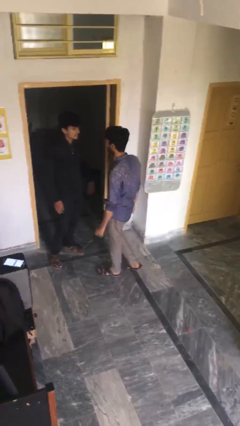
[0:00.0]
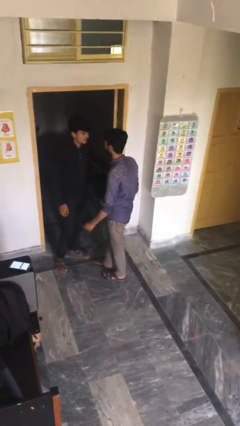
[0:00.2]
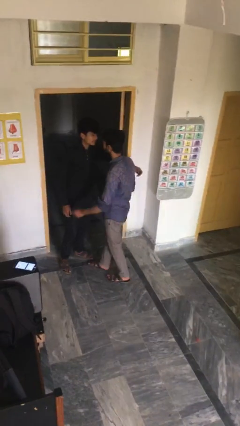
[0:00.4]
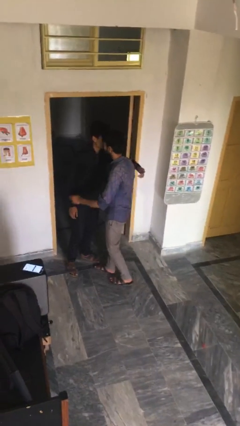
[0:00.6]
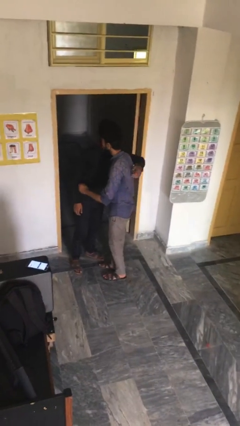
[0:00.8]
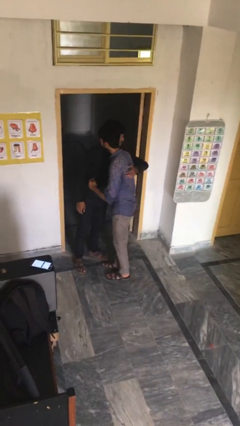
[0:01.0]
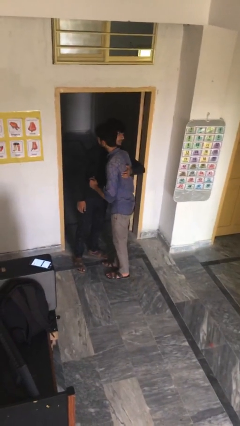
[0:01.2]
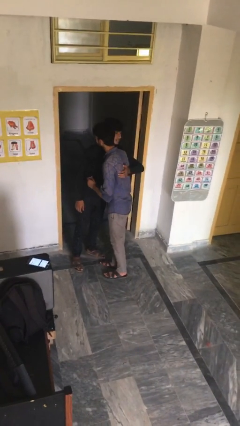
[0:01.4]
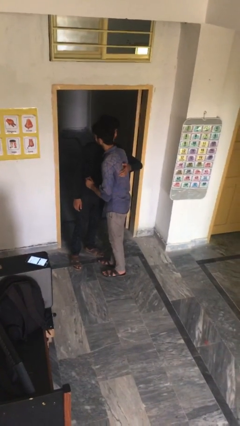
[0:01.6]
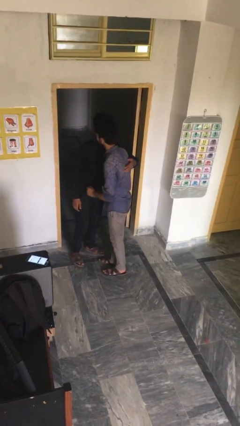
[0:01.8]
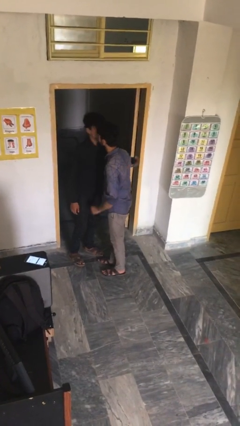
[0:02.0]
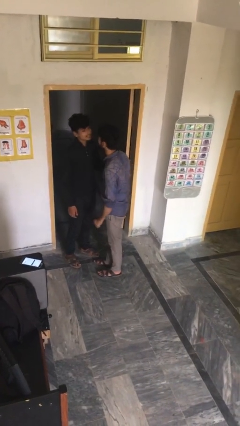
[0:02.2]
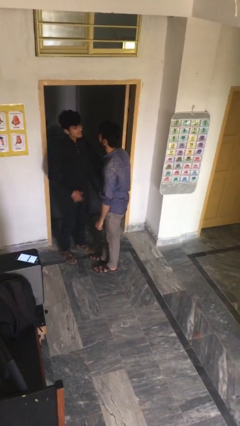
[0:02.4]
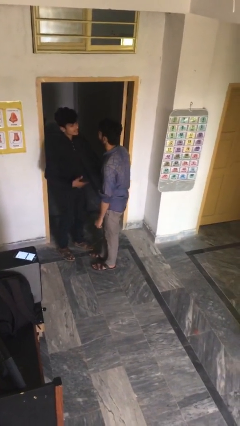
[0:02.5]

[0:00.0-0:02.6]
person embraces person

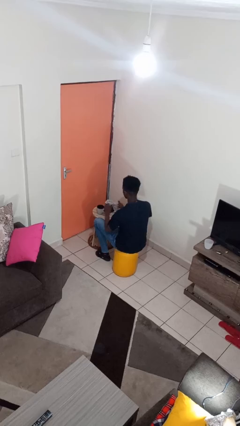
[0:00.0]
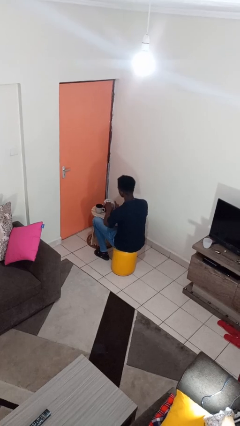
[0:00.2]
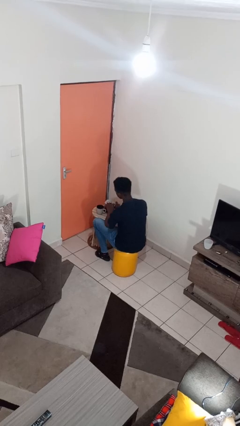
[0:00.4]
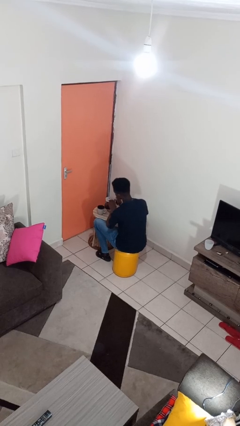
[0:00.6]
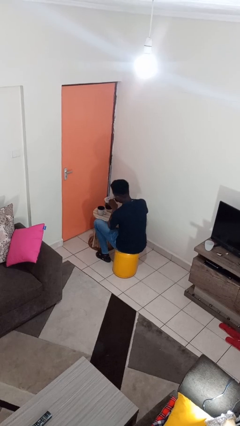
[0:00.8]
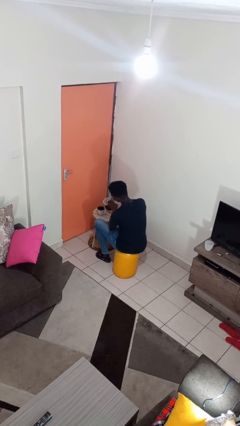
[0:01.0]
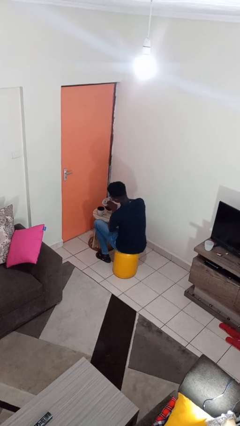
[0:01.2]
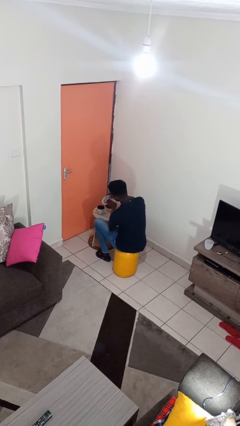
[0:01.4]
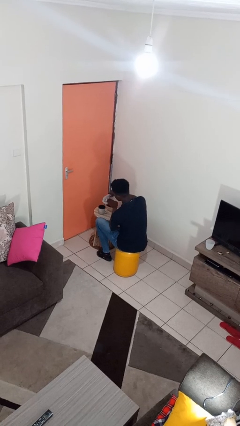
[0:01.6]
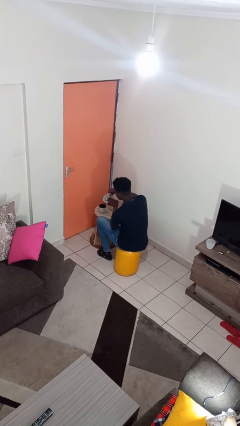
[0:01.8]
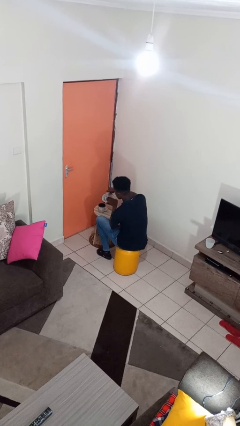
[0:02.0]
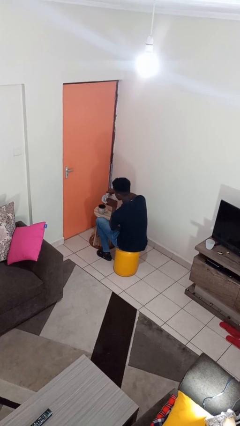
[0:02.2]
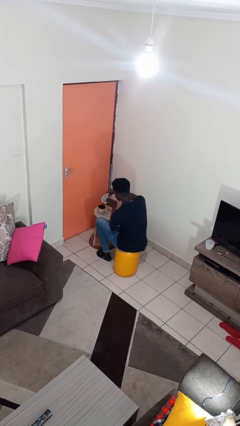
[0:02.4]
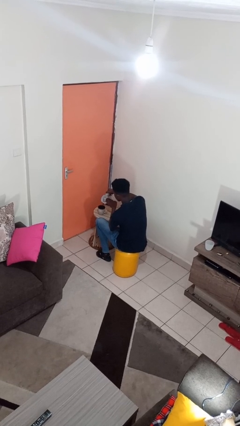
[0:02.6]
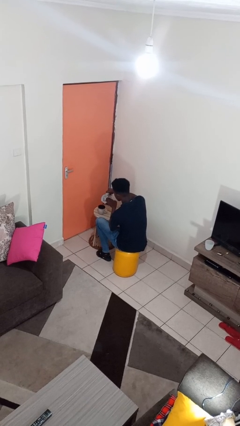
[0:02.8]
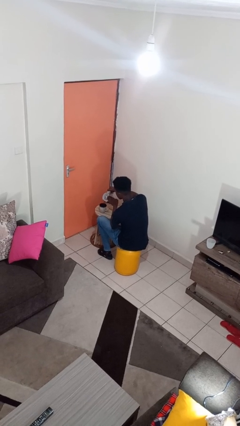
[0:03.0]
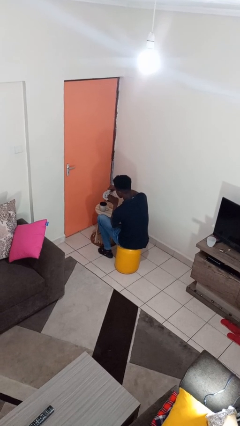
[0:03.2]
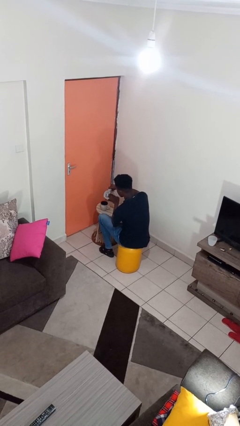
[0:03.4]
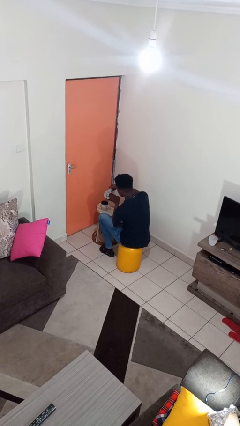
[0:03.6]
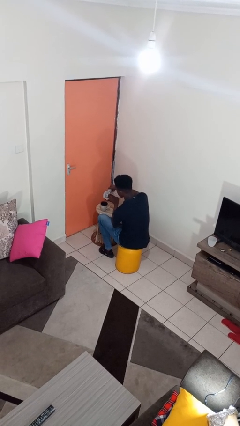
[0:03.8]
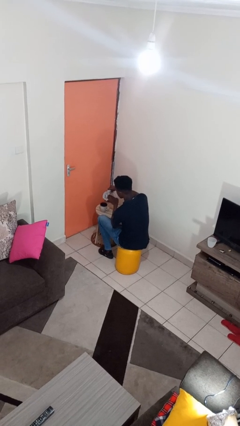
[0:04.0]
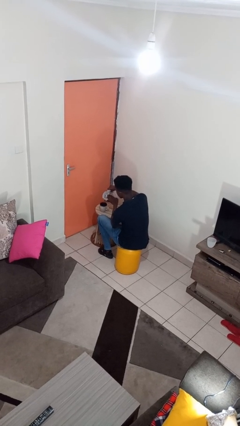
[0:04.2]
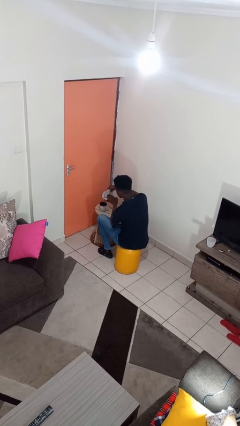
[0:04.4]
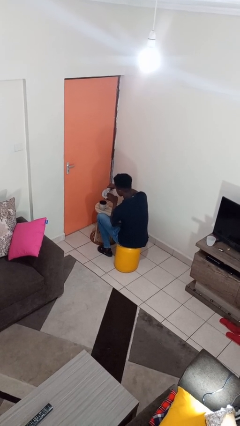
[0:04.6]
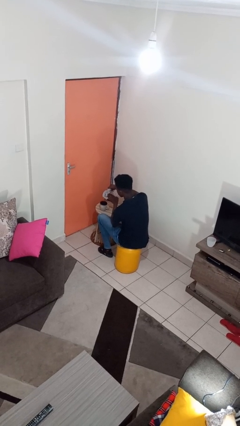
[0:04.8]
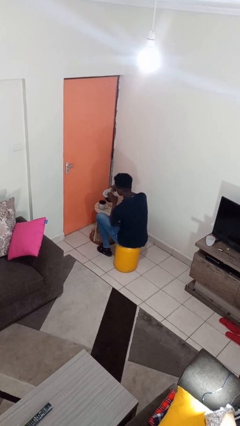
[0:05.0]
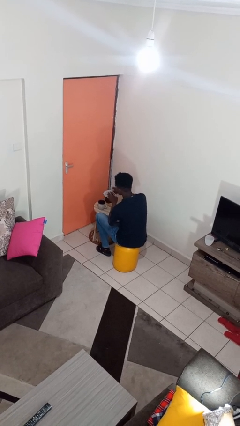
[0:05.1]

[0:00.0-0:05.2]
person pours coffee into mug

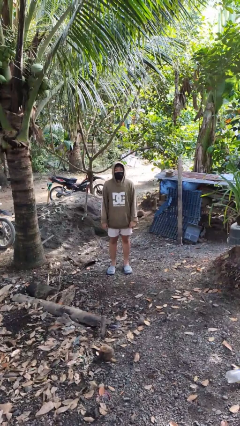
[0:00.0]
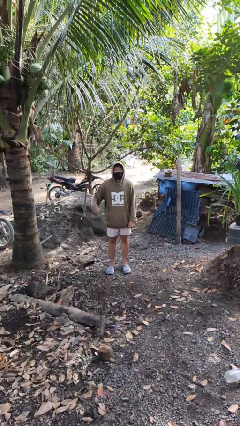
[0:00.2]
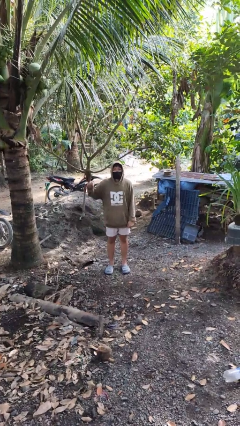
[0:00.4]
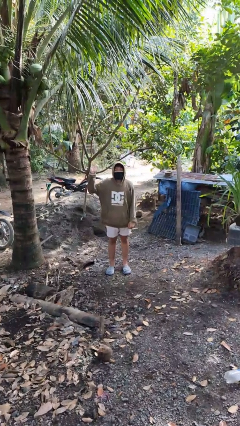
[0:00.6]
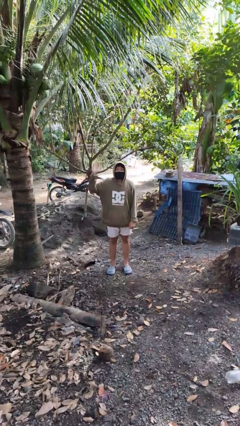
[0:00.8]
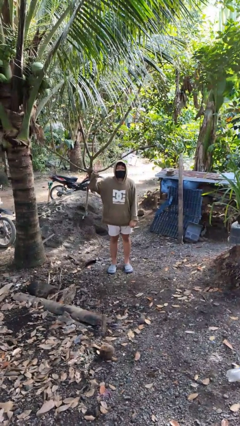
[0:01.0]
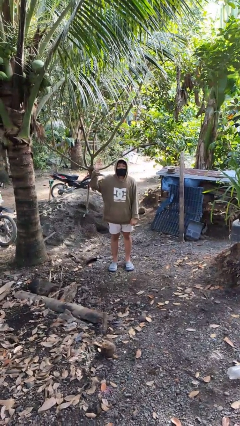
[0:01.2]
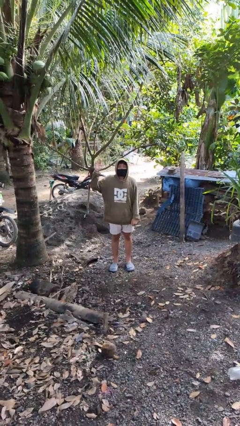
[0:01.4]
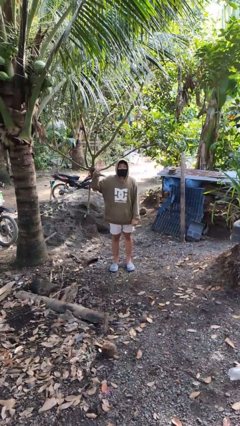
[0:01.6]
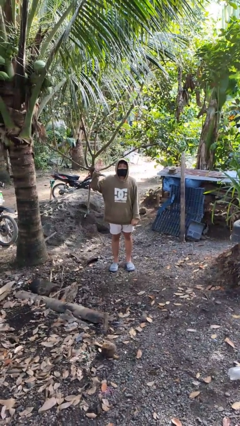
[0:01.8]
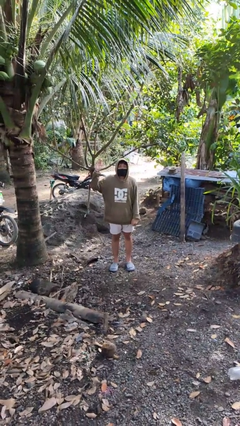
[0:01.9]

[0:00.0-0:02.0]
person gestures number five

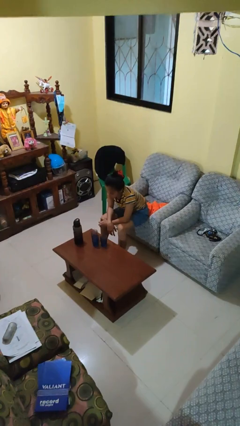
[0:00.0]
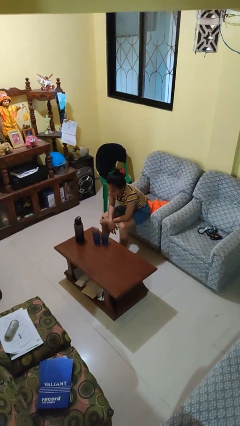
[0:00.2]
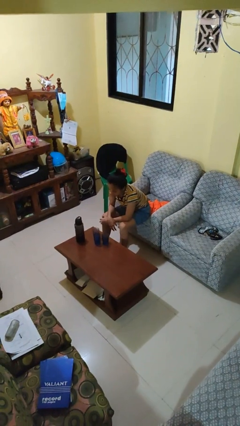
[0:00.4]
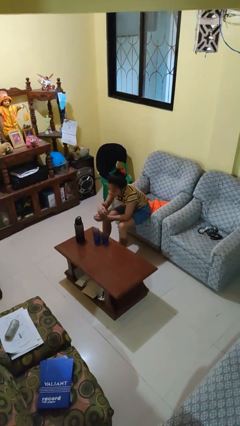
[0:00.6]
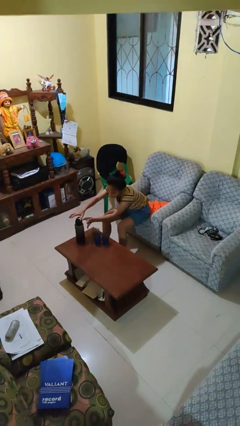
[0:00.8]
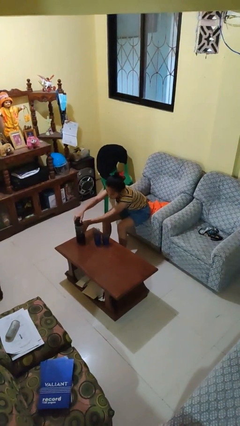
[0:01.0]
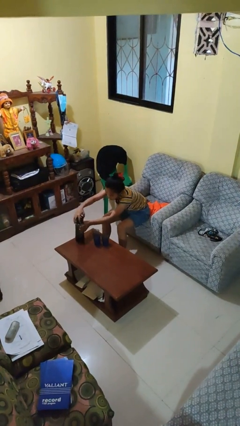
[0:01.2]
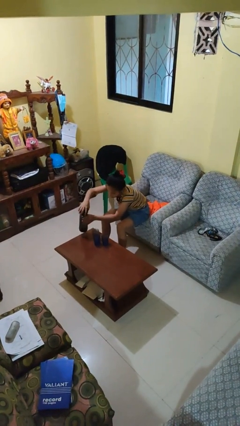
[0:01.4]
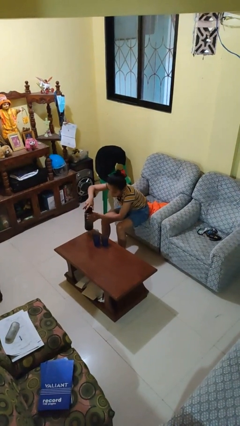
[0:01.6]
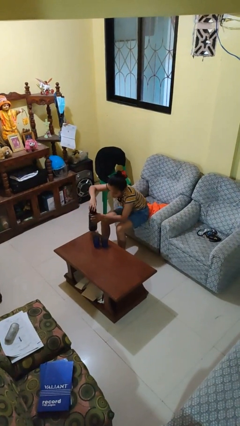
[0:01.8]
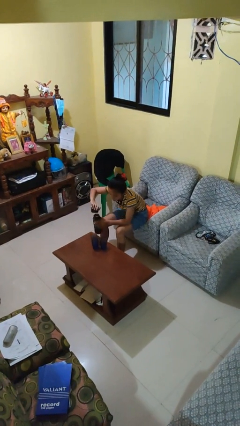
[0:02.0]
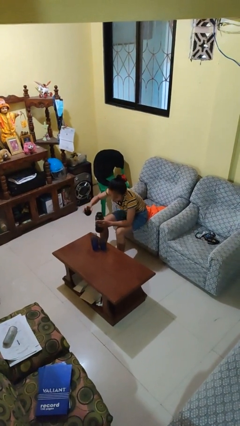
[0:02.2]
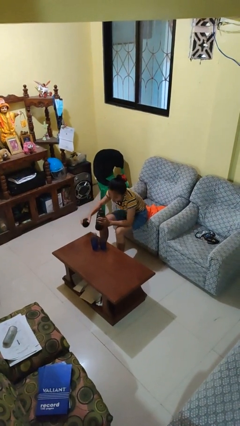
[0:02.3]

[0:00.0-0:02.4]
person unscrews lid from bottle

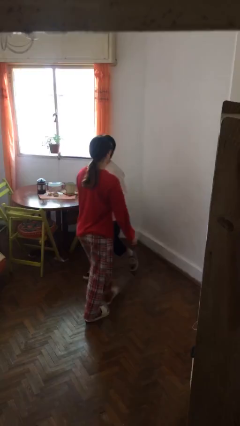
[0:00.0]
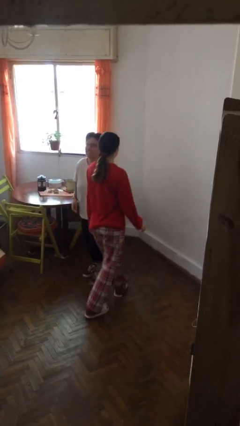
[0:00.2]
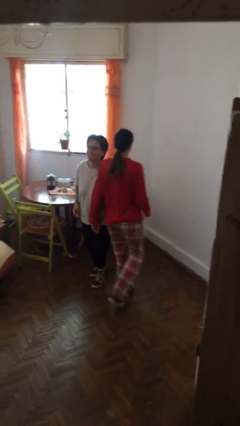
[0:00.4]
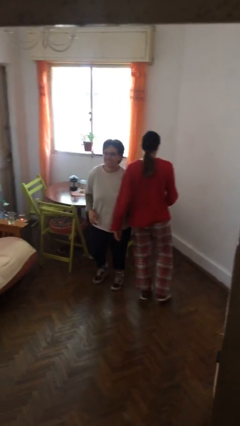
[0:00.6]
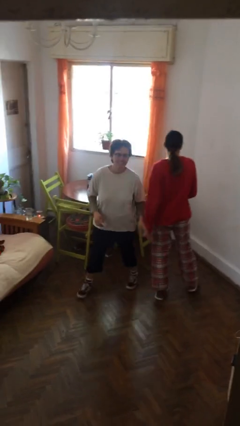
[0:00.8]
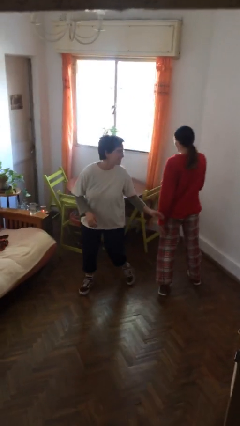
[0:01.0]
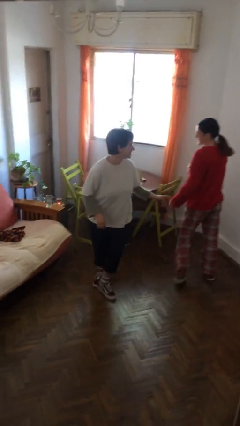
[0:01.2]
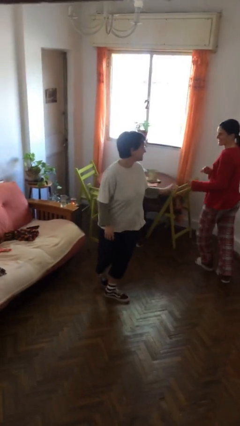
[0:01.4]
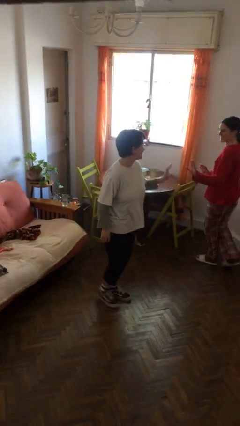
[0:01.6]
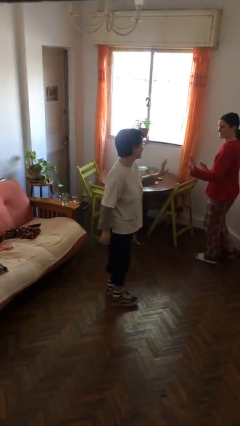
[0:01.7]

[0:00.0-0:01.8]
person bumps into person

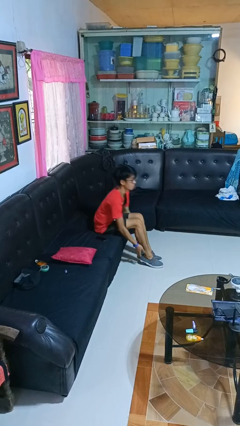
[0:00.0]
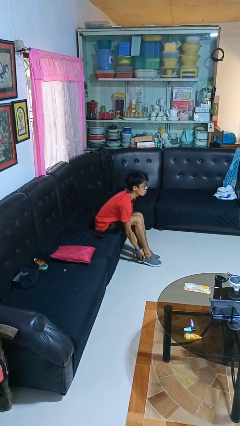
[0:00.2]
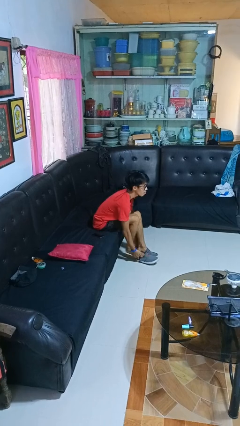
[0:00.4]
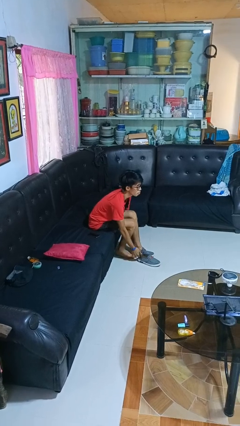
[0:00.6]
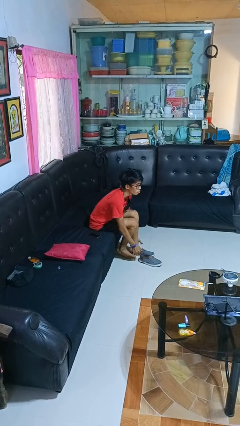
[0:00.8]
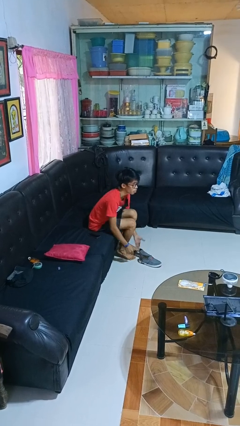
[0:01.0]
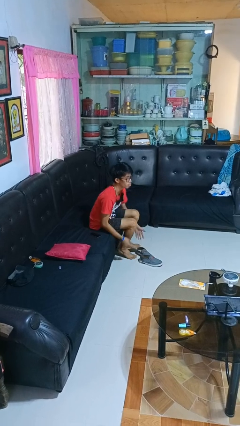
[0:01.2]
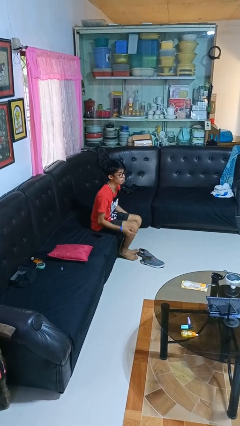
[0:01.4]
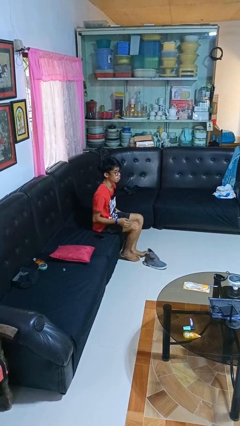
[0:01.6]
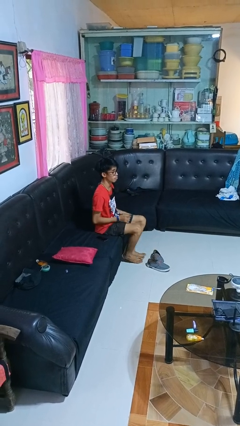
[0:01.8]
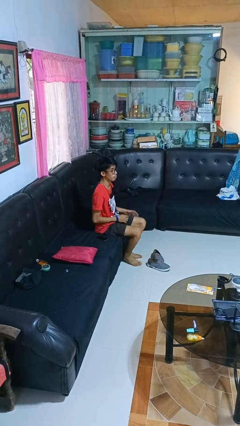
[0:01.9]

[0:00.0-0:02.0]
person takes off shoes

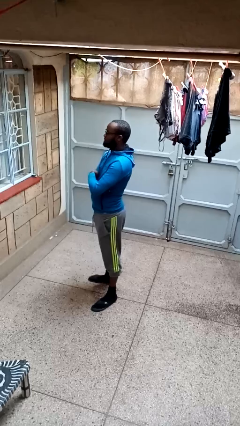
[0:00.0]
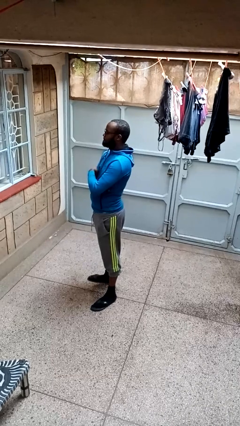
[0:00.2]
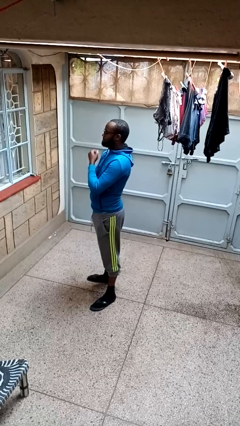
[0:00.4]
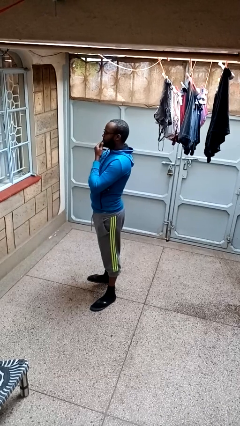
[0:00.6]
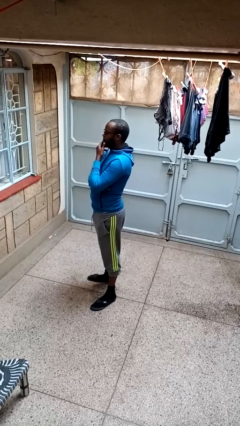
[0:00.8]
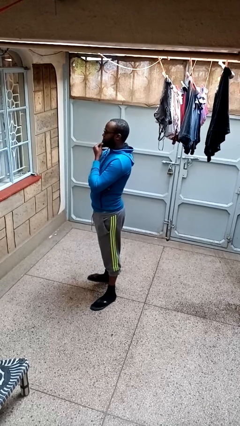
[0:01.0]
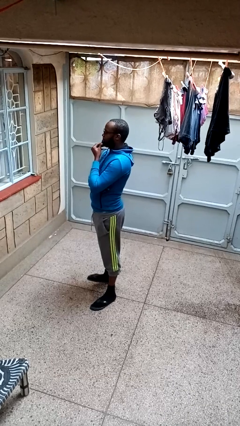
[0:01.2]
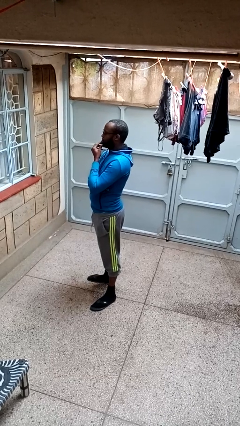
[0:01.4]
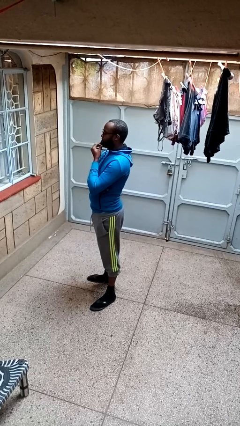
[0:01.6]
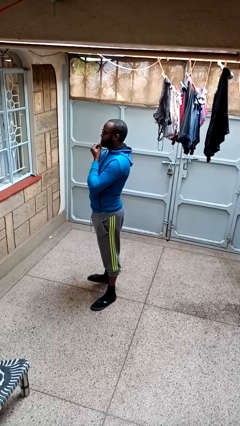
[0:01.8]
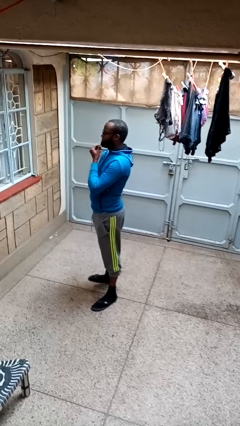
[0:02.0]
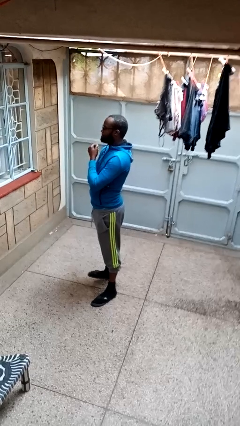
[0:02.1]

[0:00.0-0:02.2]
person strokes chin
